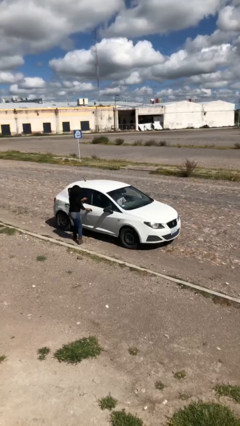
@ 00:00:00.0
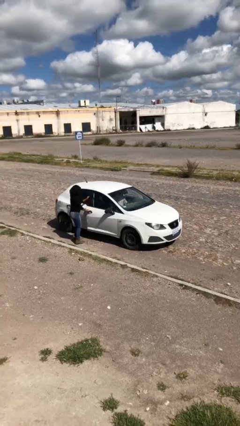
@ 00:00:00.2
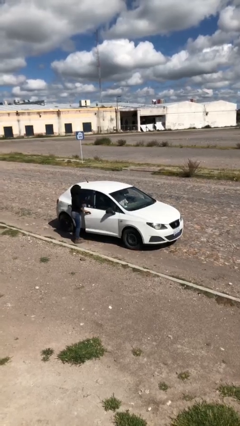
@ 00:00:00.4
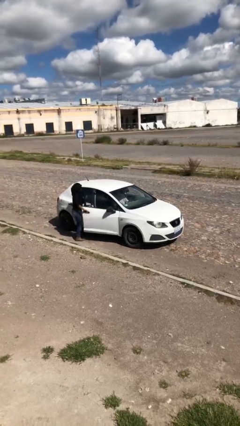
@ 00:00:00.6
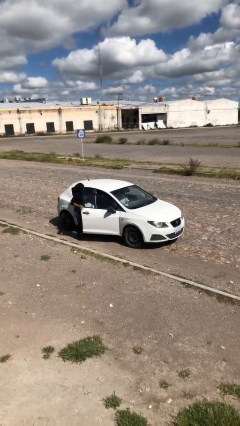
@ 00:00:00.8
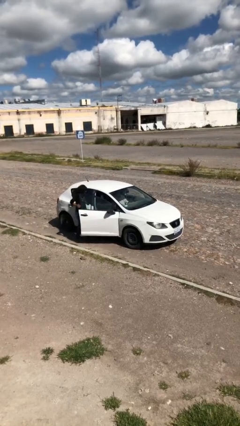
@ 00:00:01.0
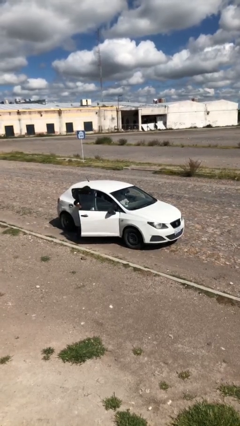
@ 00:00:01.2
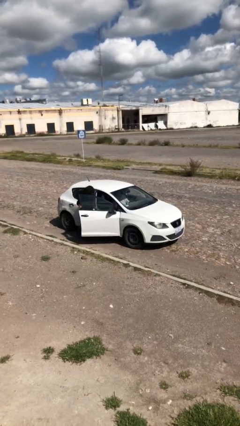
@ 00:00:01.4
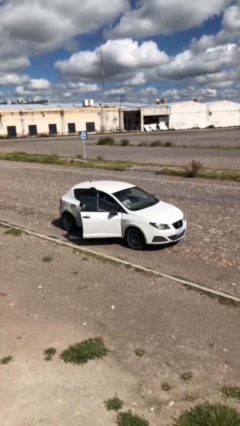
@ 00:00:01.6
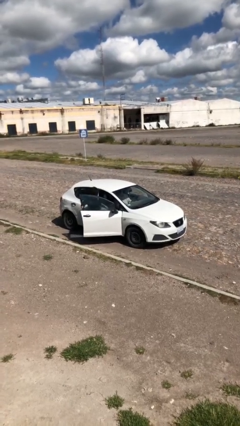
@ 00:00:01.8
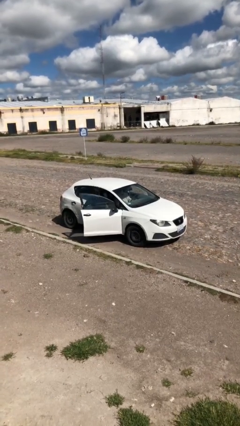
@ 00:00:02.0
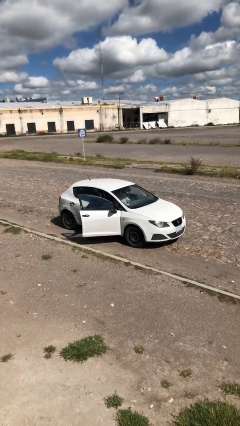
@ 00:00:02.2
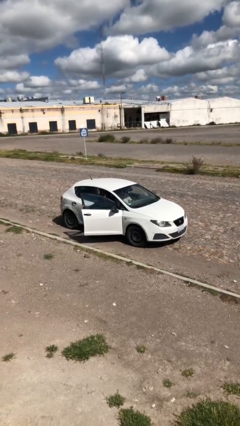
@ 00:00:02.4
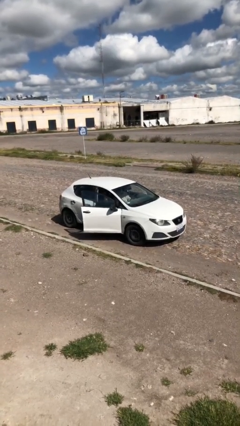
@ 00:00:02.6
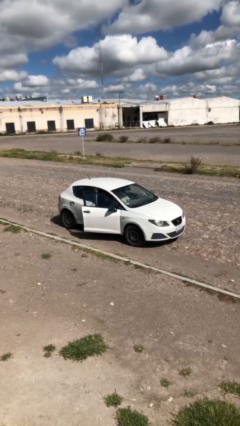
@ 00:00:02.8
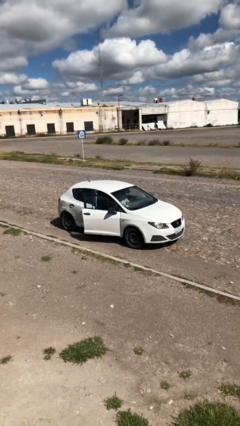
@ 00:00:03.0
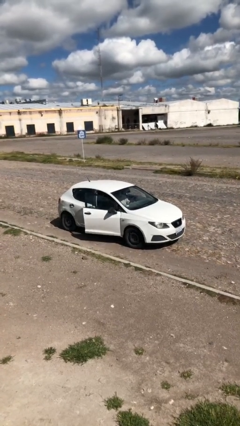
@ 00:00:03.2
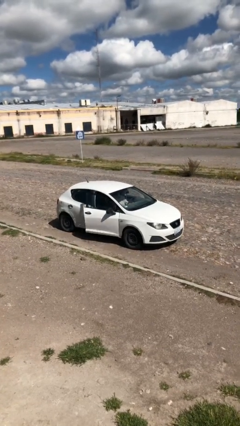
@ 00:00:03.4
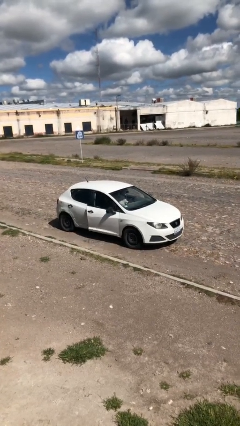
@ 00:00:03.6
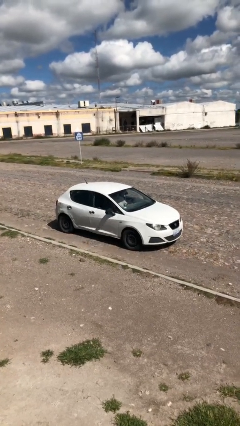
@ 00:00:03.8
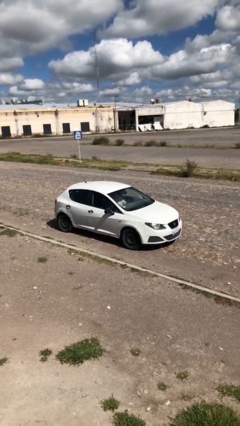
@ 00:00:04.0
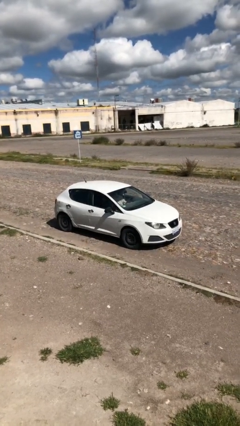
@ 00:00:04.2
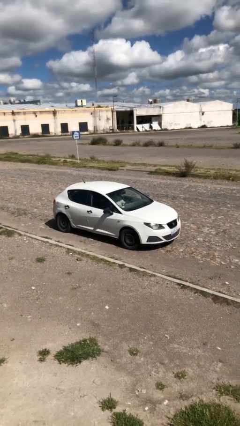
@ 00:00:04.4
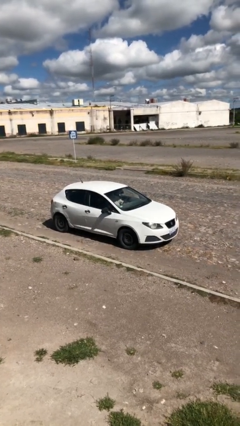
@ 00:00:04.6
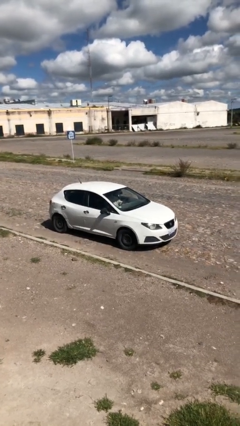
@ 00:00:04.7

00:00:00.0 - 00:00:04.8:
car picks up person

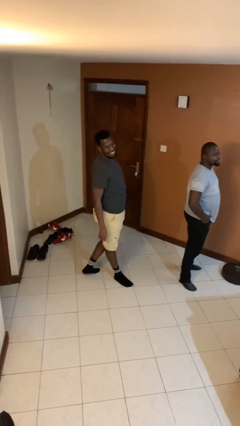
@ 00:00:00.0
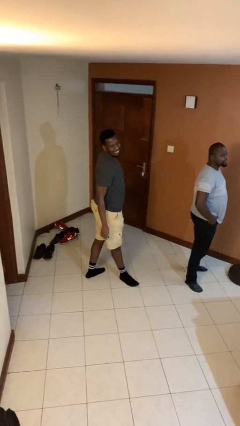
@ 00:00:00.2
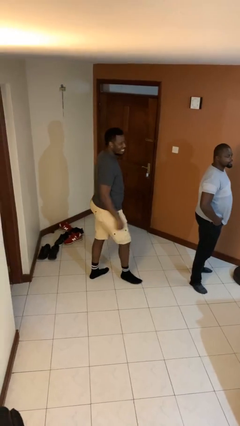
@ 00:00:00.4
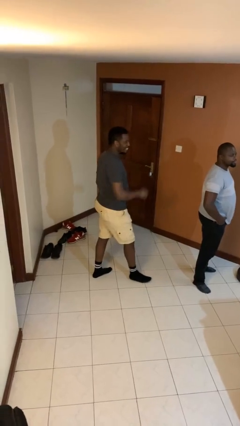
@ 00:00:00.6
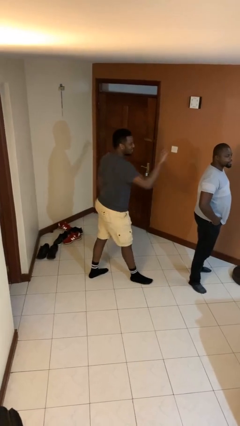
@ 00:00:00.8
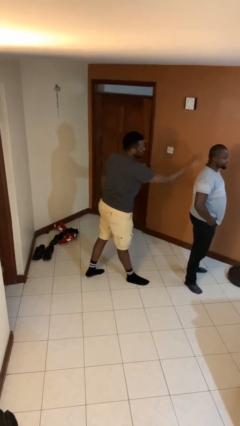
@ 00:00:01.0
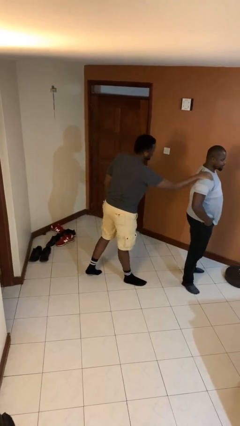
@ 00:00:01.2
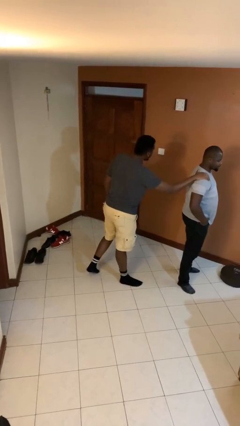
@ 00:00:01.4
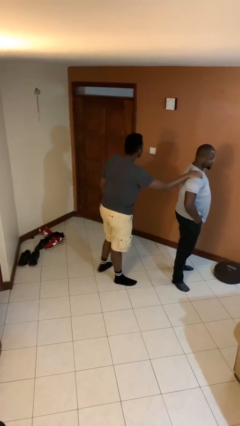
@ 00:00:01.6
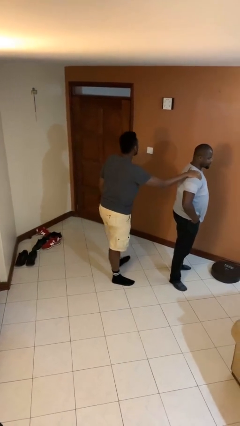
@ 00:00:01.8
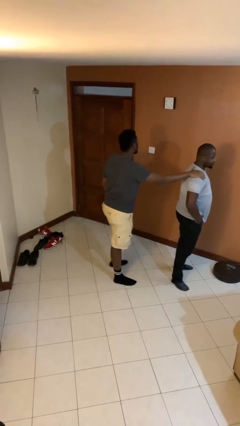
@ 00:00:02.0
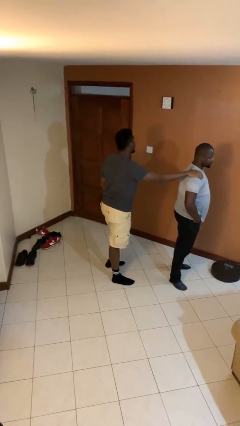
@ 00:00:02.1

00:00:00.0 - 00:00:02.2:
person grabs person by shoulder

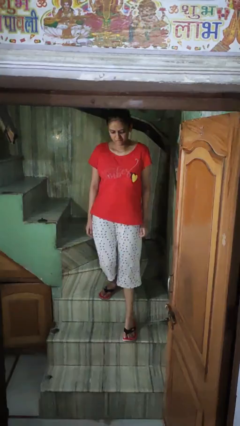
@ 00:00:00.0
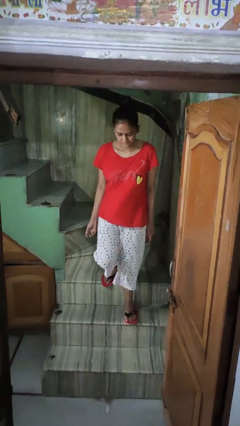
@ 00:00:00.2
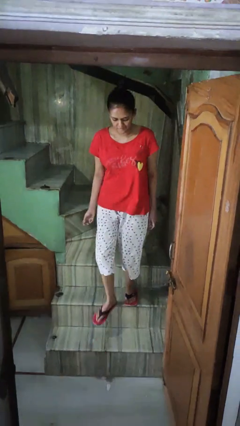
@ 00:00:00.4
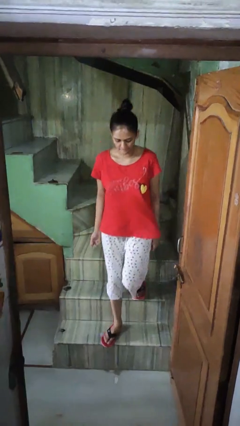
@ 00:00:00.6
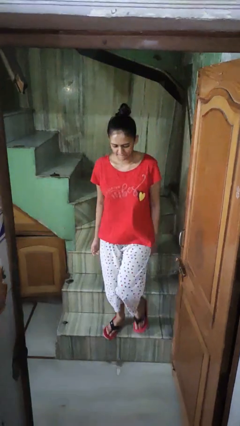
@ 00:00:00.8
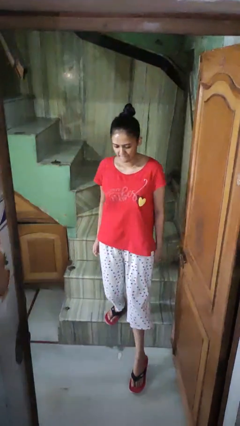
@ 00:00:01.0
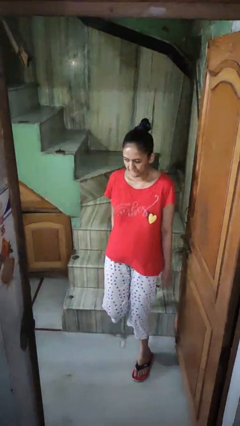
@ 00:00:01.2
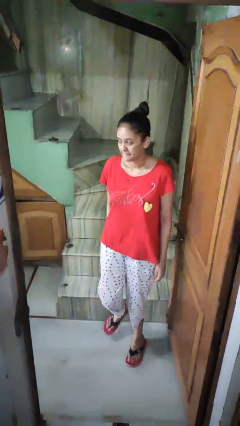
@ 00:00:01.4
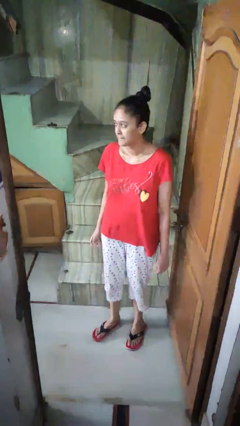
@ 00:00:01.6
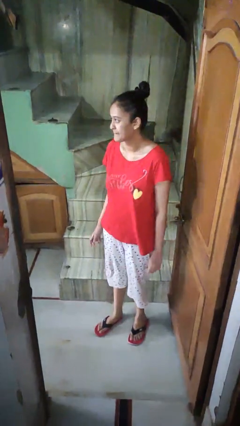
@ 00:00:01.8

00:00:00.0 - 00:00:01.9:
person climbs down stairs

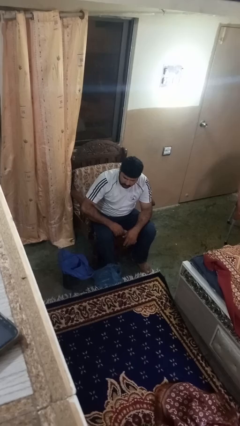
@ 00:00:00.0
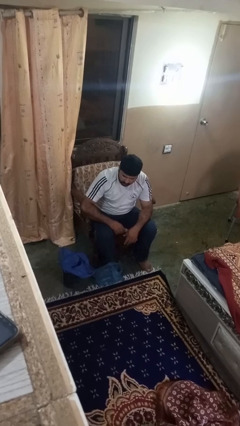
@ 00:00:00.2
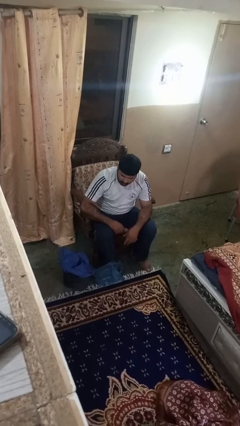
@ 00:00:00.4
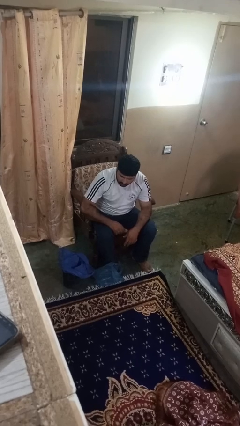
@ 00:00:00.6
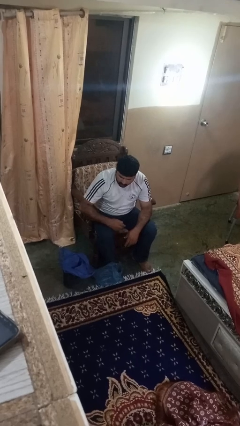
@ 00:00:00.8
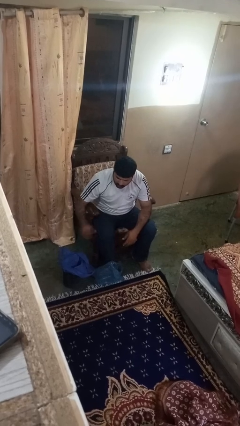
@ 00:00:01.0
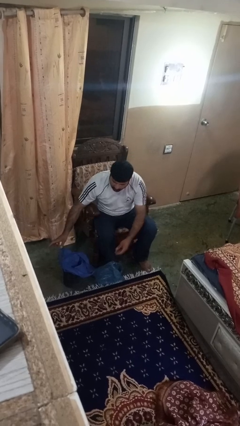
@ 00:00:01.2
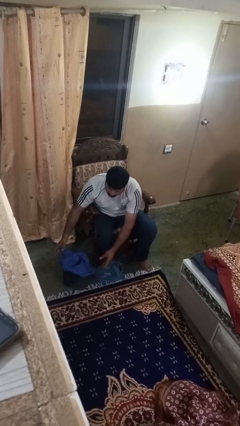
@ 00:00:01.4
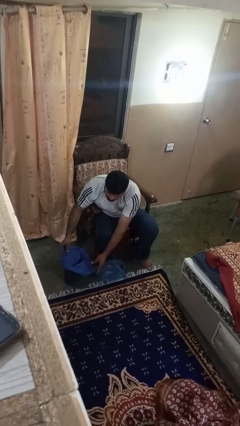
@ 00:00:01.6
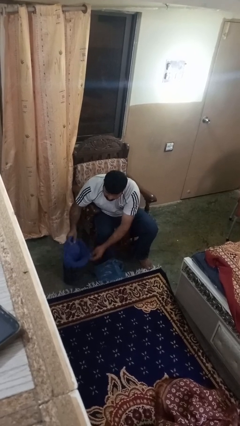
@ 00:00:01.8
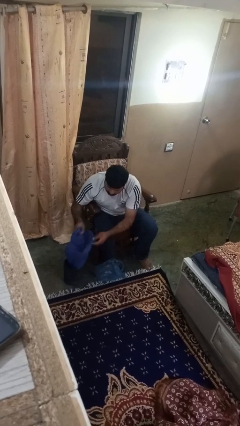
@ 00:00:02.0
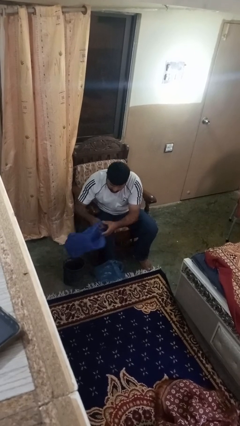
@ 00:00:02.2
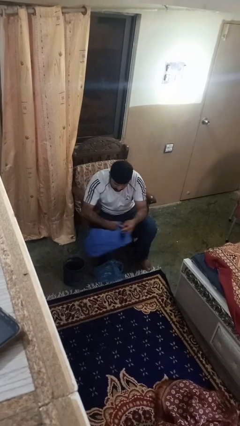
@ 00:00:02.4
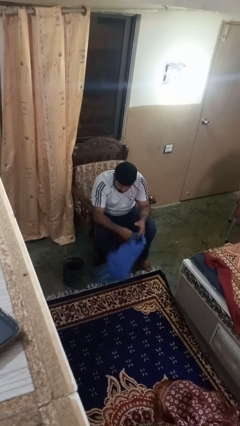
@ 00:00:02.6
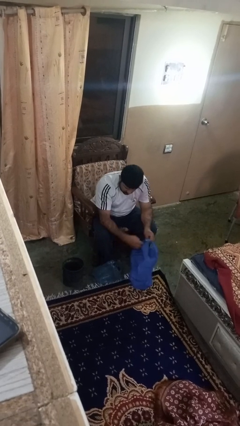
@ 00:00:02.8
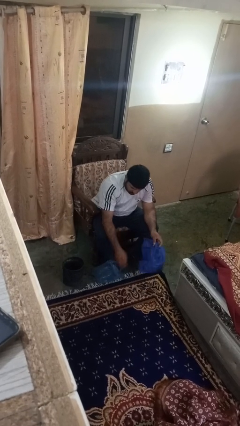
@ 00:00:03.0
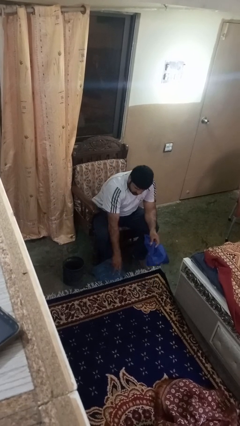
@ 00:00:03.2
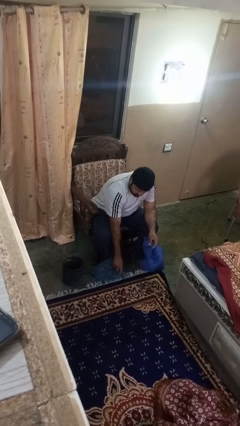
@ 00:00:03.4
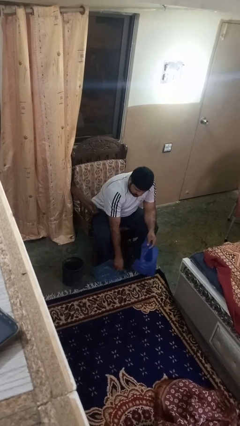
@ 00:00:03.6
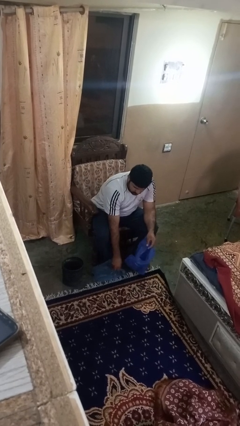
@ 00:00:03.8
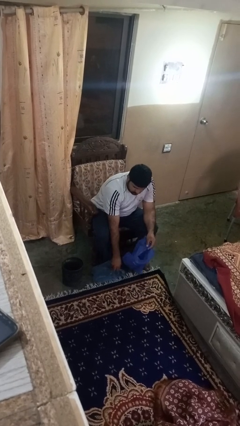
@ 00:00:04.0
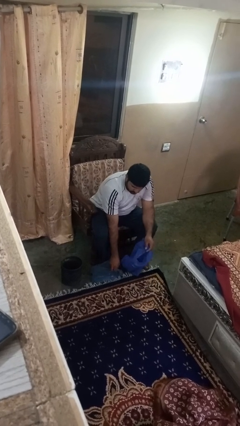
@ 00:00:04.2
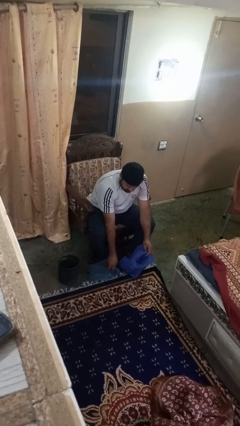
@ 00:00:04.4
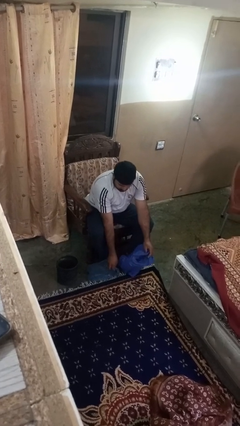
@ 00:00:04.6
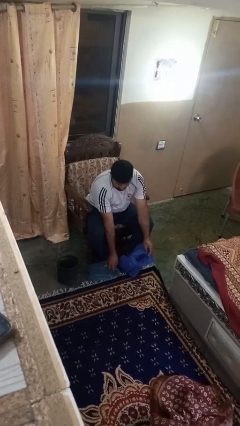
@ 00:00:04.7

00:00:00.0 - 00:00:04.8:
person removes trashbag from trashcan

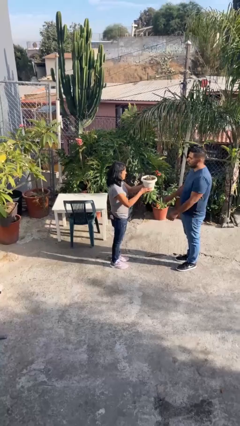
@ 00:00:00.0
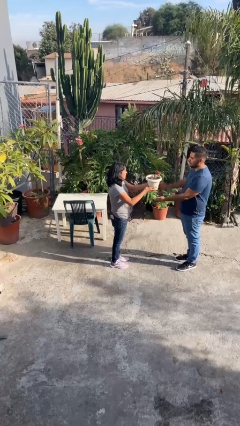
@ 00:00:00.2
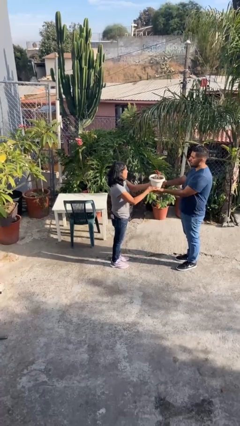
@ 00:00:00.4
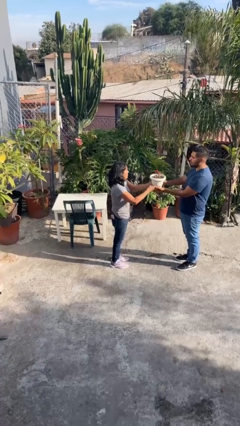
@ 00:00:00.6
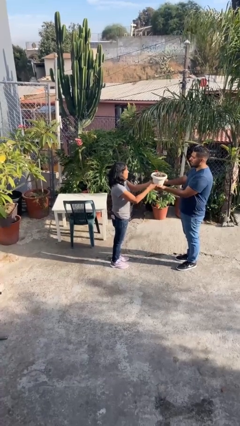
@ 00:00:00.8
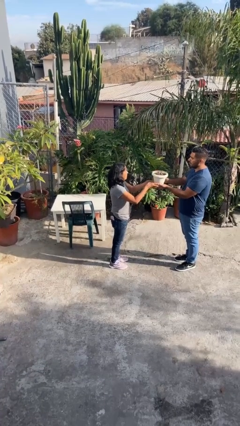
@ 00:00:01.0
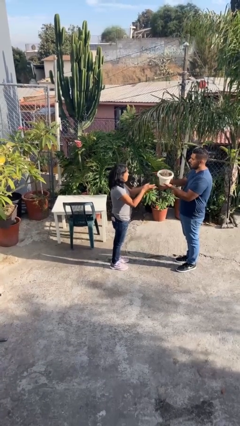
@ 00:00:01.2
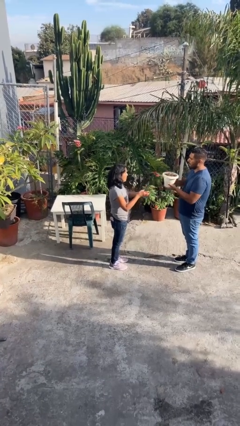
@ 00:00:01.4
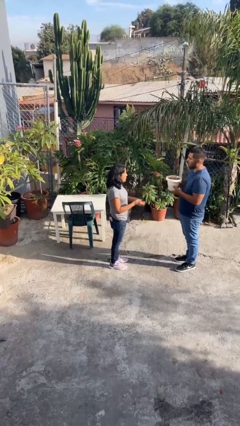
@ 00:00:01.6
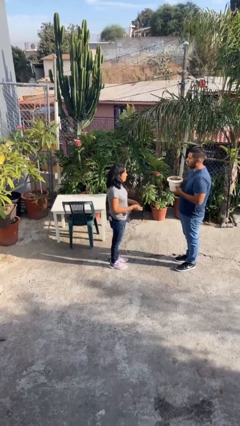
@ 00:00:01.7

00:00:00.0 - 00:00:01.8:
person transfers object to person

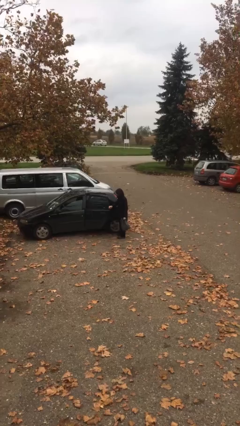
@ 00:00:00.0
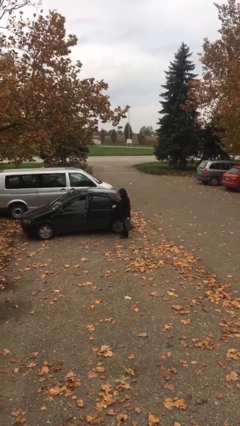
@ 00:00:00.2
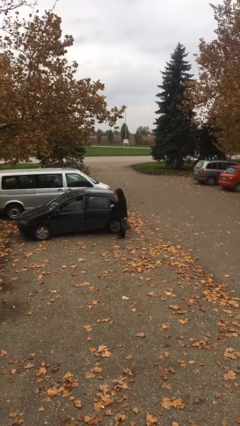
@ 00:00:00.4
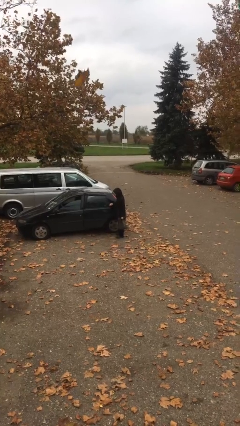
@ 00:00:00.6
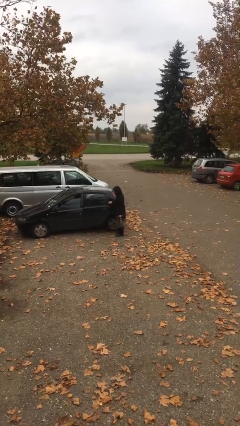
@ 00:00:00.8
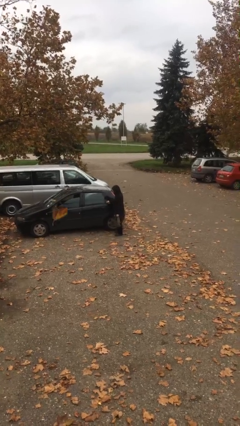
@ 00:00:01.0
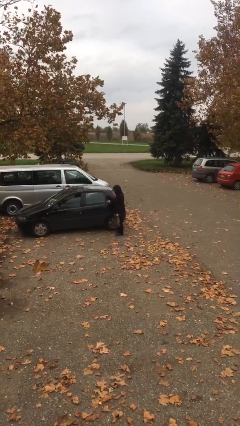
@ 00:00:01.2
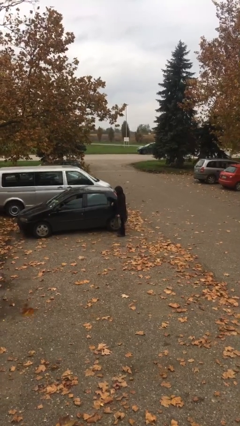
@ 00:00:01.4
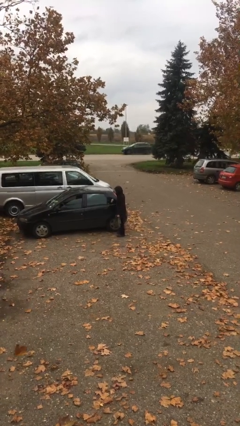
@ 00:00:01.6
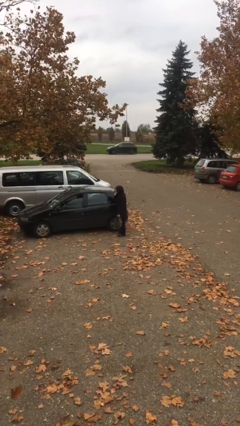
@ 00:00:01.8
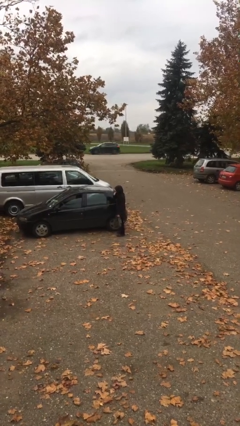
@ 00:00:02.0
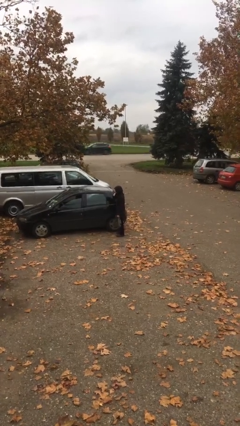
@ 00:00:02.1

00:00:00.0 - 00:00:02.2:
person closes car door
